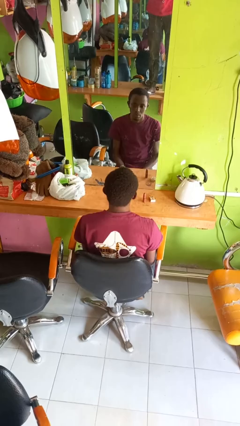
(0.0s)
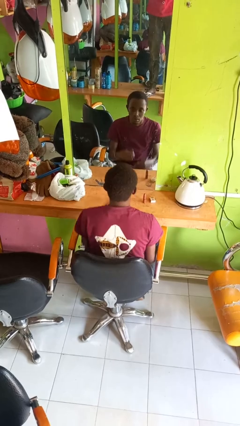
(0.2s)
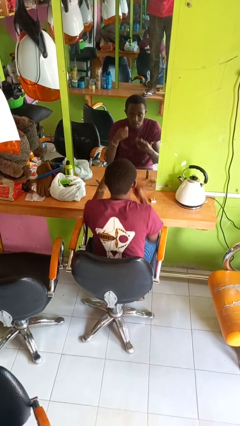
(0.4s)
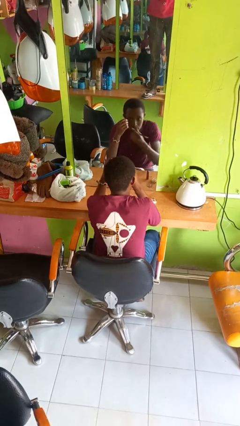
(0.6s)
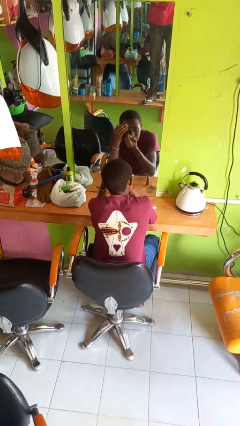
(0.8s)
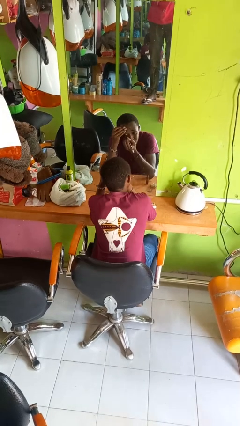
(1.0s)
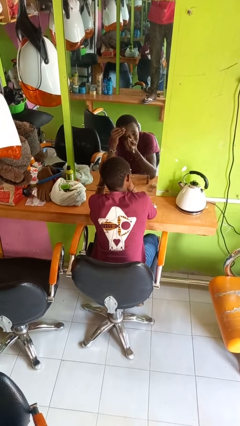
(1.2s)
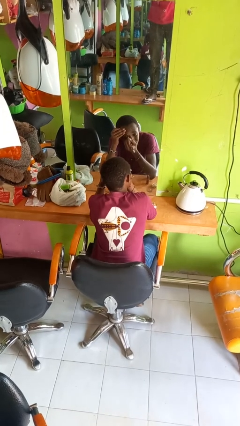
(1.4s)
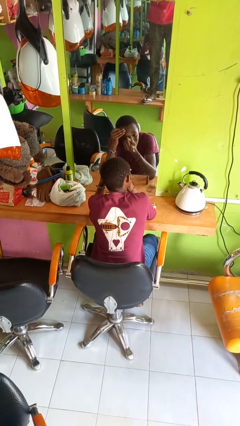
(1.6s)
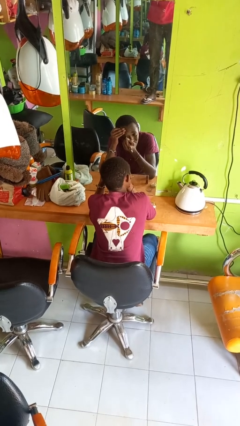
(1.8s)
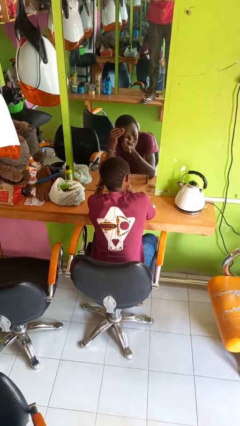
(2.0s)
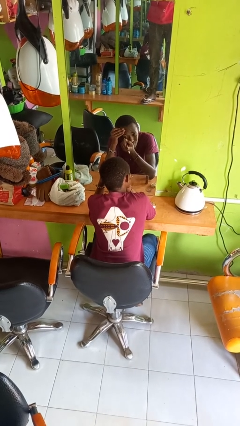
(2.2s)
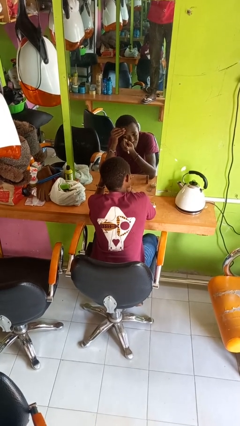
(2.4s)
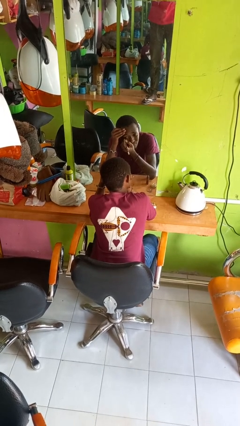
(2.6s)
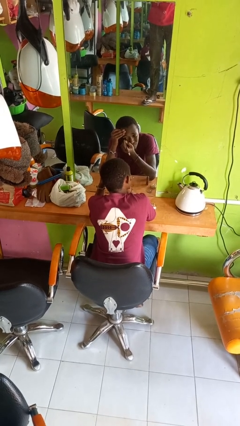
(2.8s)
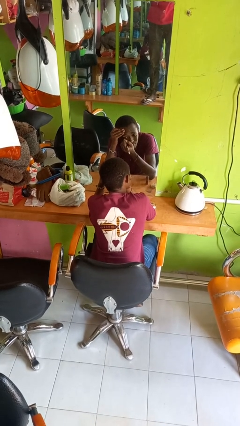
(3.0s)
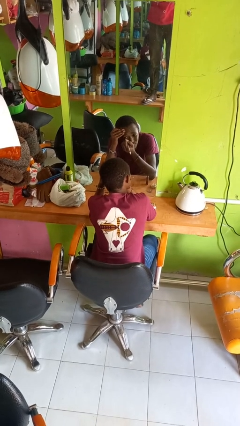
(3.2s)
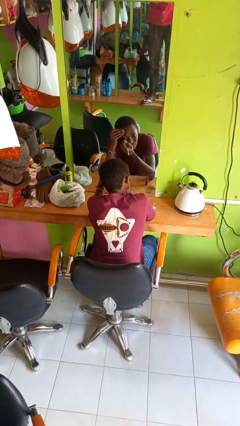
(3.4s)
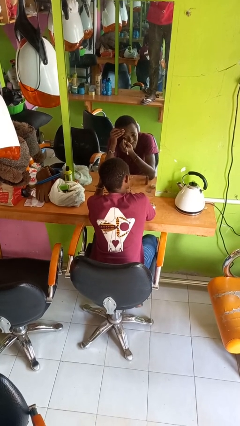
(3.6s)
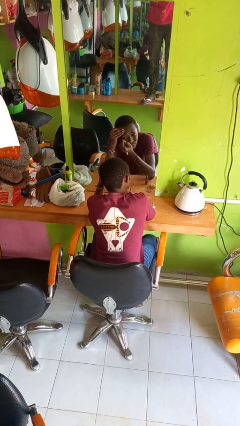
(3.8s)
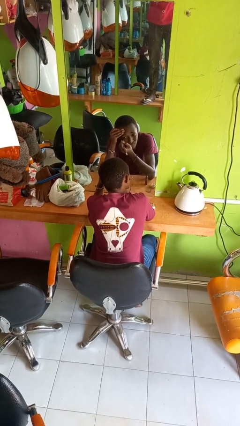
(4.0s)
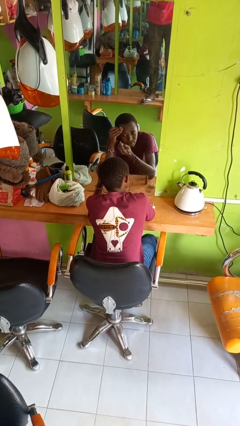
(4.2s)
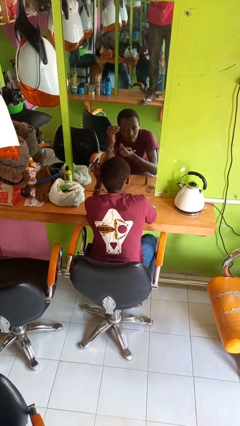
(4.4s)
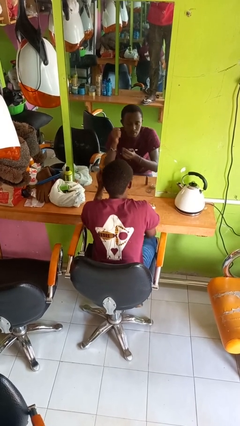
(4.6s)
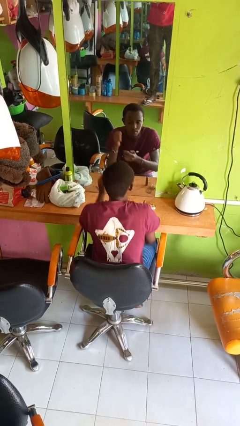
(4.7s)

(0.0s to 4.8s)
person applies eye makeup

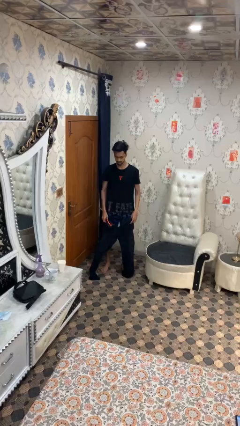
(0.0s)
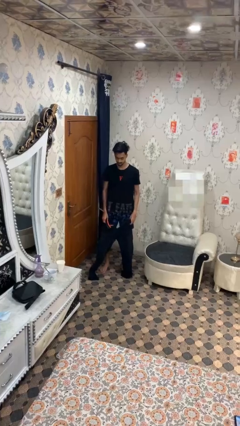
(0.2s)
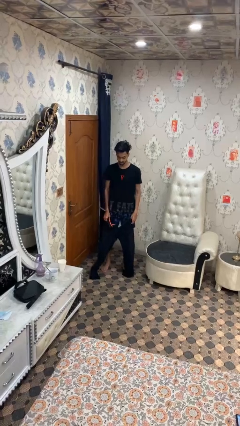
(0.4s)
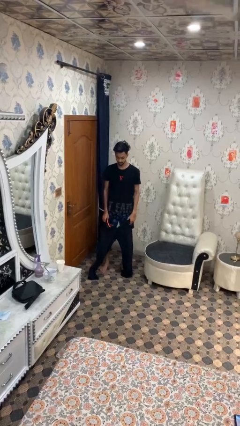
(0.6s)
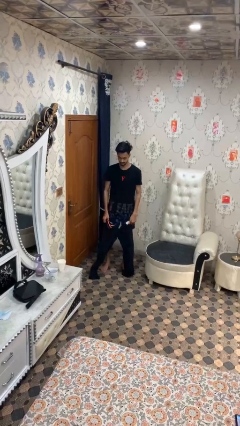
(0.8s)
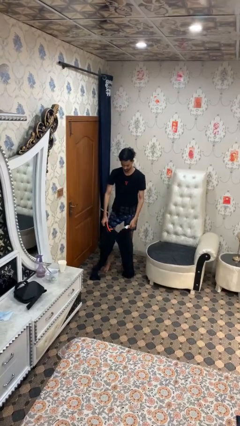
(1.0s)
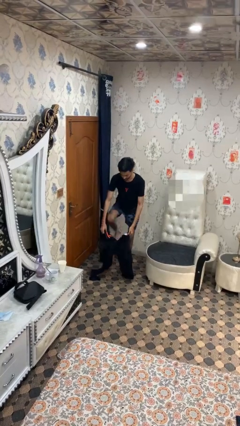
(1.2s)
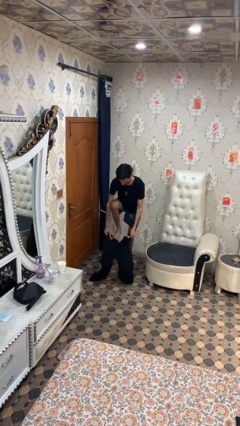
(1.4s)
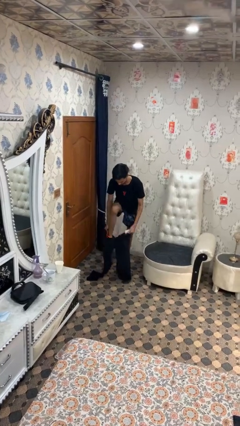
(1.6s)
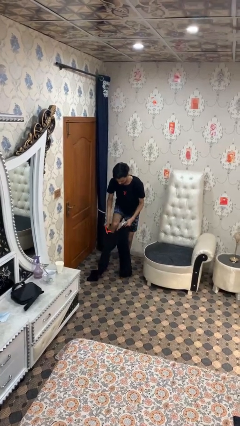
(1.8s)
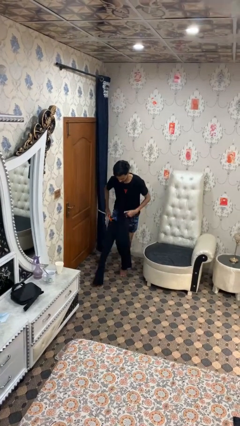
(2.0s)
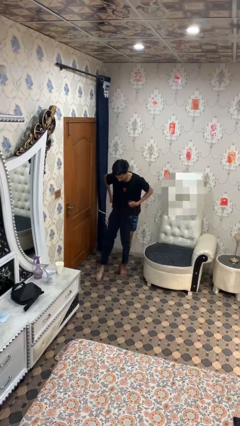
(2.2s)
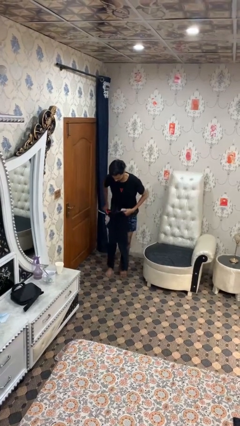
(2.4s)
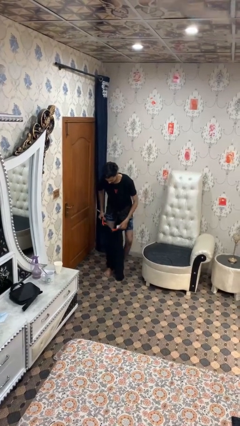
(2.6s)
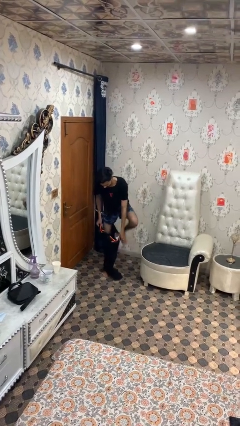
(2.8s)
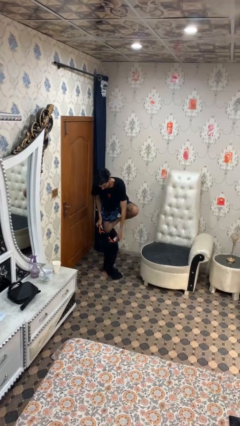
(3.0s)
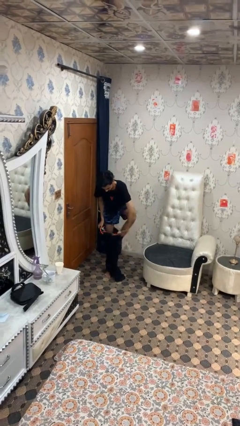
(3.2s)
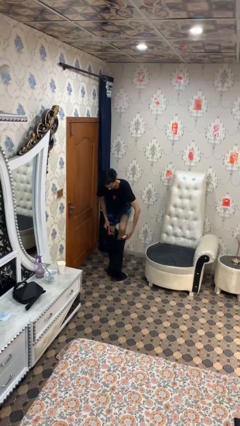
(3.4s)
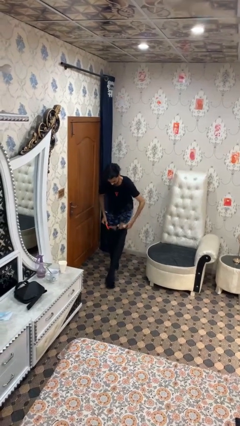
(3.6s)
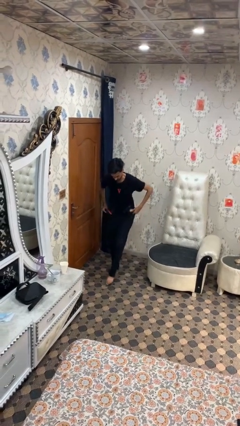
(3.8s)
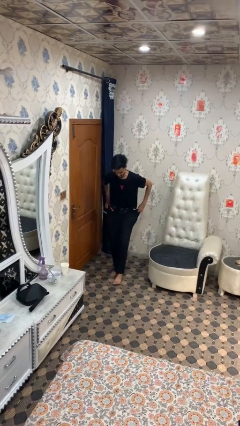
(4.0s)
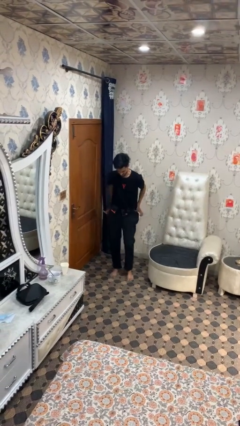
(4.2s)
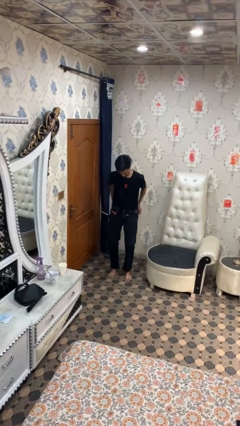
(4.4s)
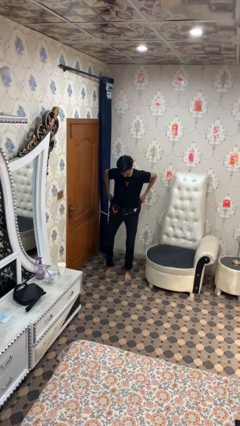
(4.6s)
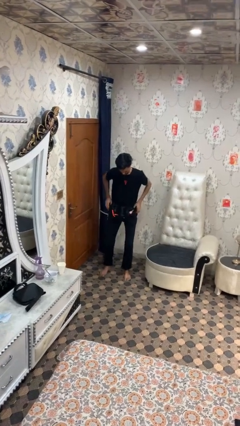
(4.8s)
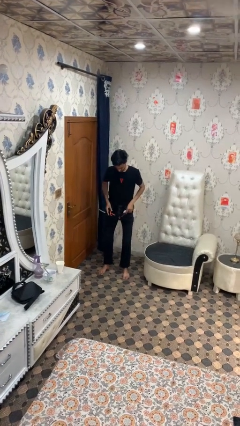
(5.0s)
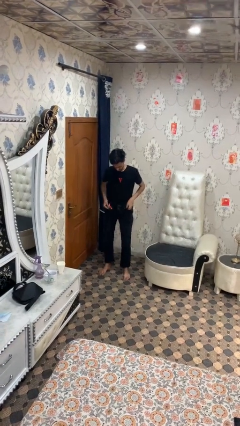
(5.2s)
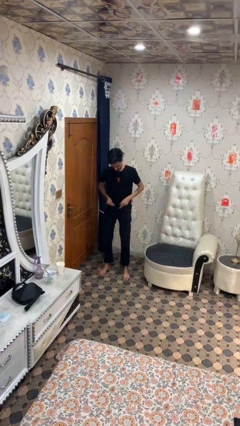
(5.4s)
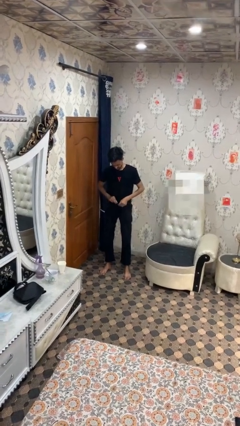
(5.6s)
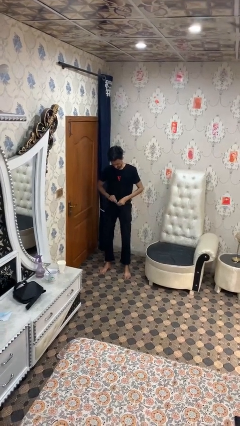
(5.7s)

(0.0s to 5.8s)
person puts on pants

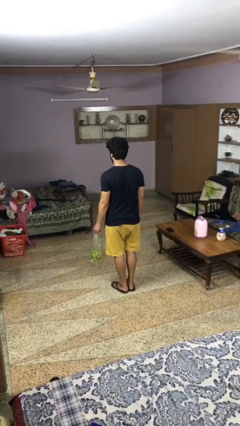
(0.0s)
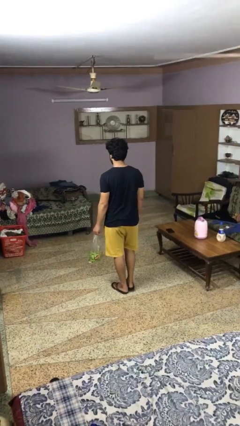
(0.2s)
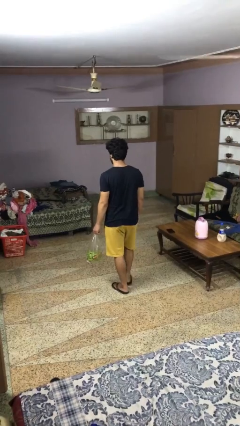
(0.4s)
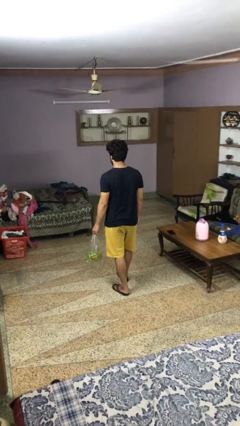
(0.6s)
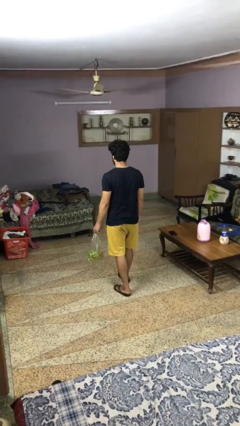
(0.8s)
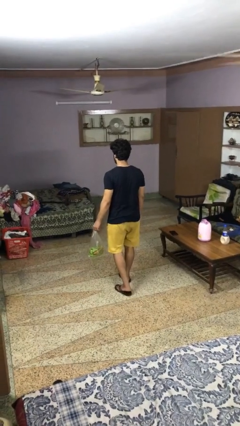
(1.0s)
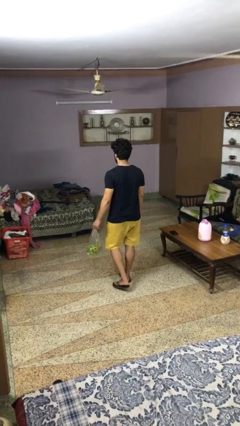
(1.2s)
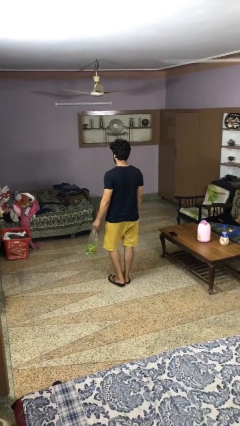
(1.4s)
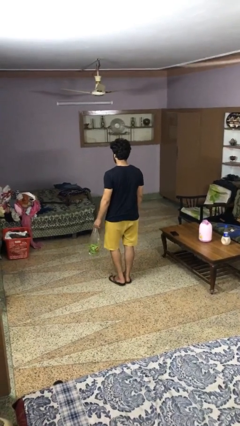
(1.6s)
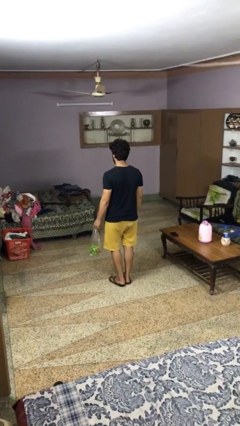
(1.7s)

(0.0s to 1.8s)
person carries groceries

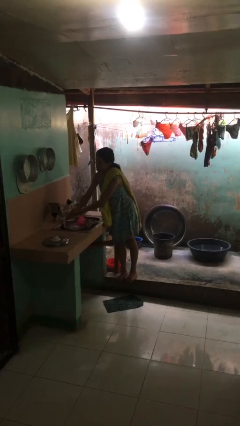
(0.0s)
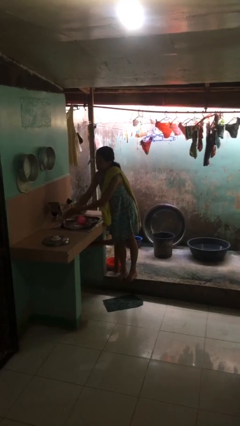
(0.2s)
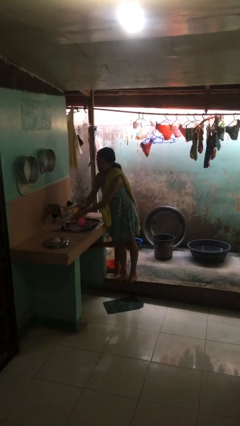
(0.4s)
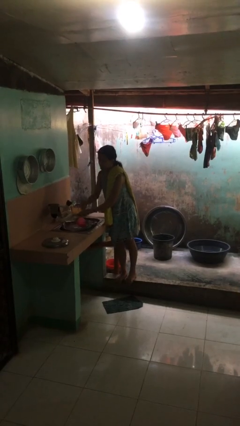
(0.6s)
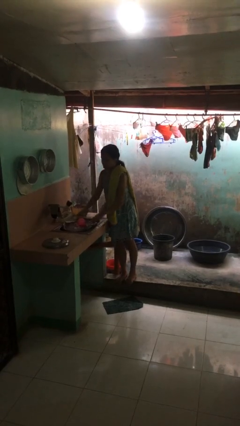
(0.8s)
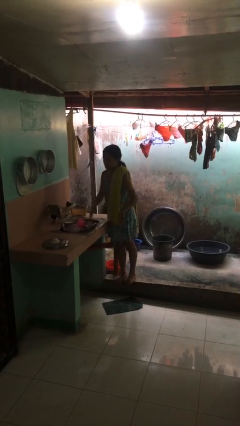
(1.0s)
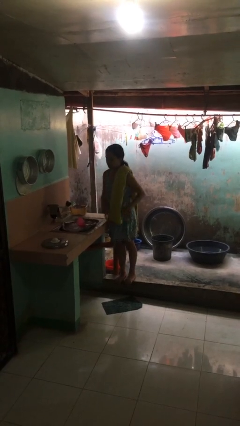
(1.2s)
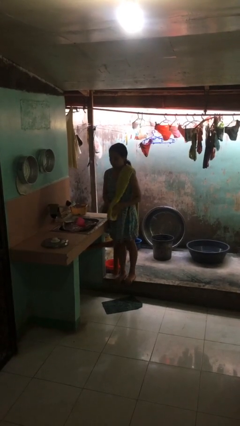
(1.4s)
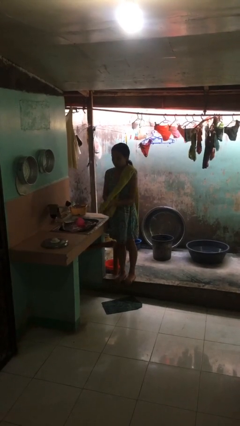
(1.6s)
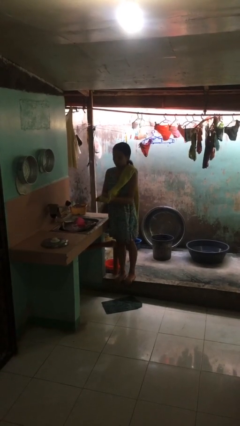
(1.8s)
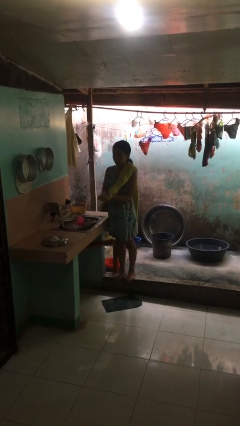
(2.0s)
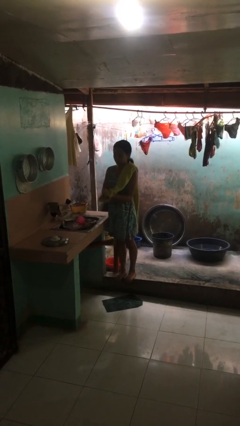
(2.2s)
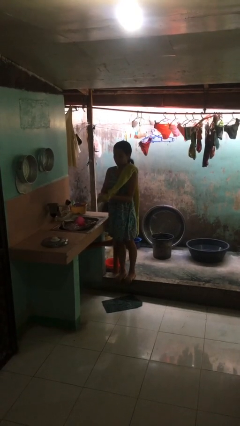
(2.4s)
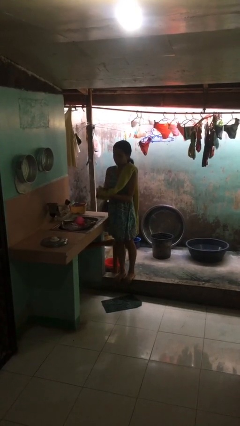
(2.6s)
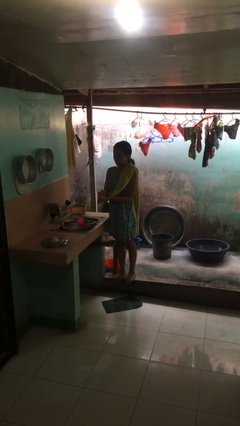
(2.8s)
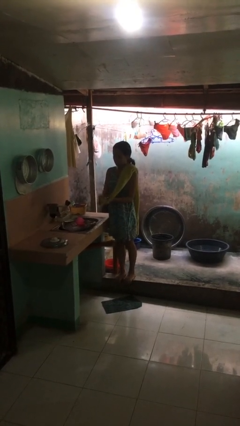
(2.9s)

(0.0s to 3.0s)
person dries hands with towel

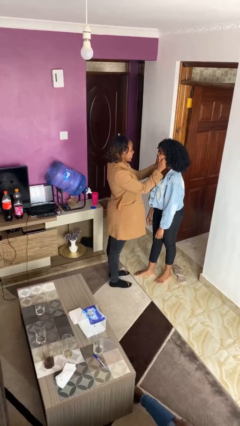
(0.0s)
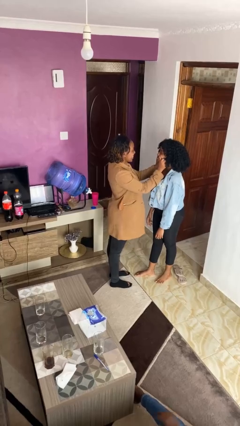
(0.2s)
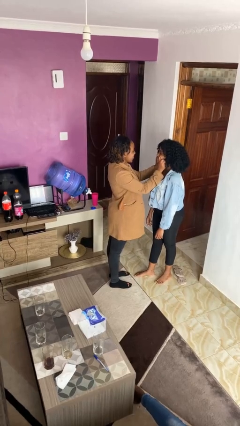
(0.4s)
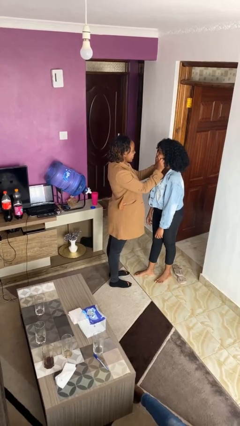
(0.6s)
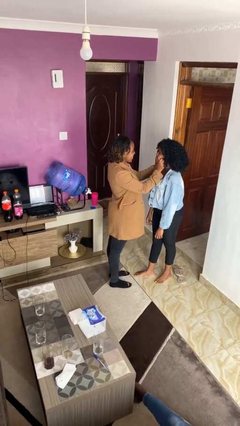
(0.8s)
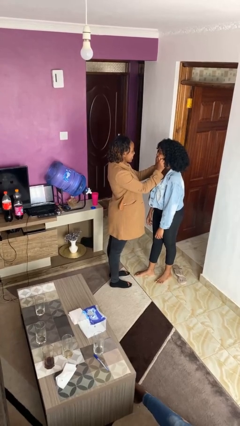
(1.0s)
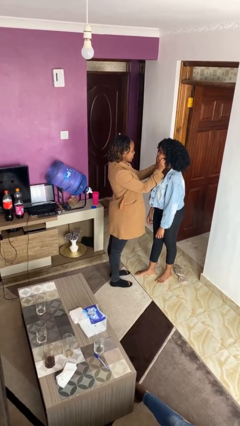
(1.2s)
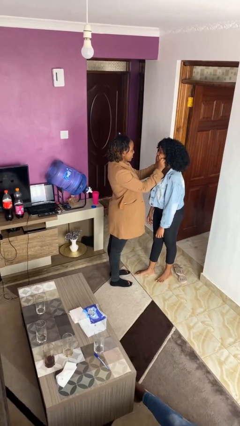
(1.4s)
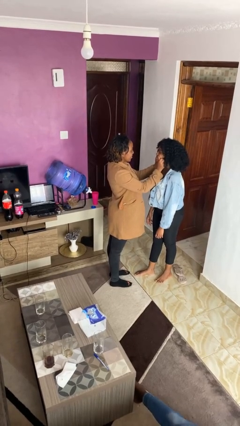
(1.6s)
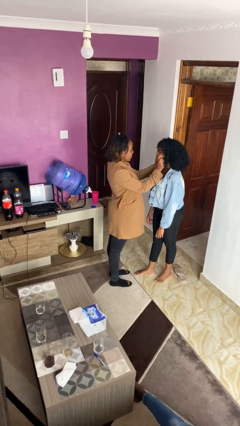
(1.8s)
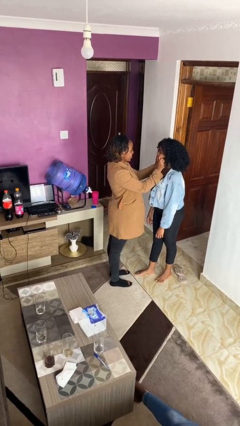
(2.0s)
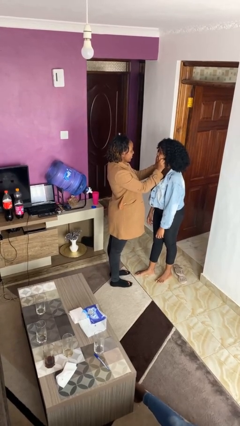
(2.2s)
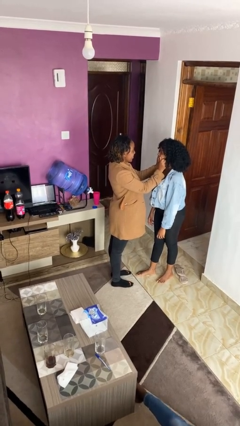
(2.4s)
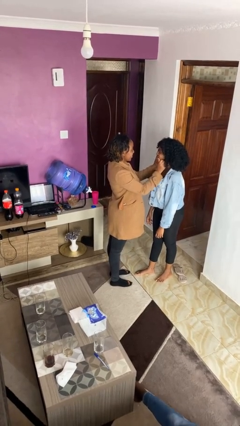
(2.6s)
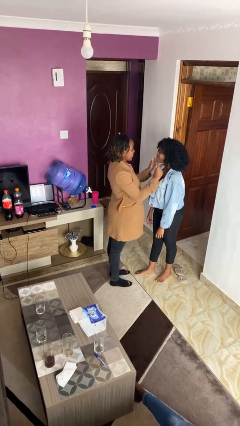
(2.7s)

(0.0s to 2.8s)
person touches face of person
